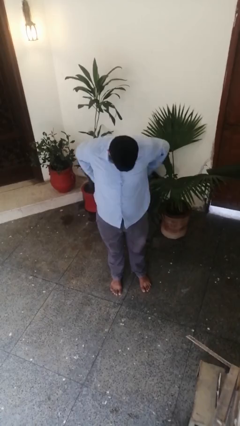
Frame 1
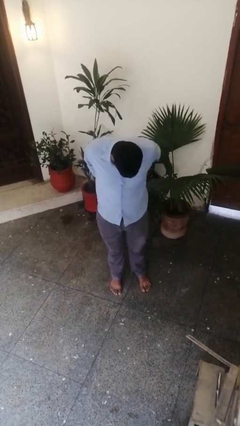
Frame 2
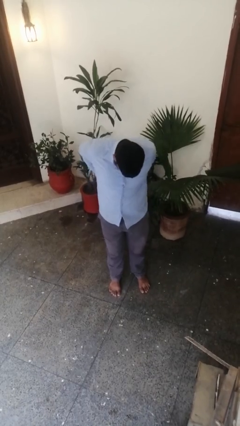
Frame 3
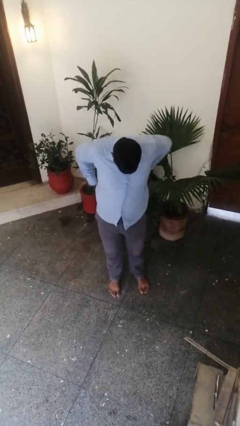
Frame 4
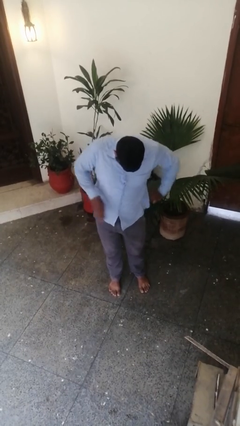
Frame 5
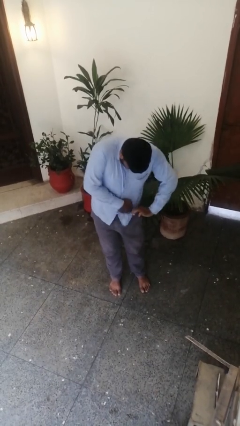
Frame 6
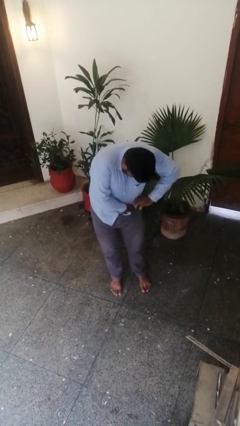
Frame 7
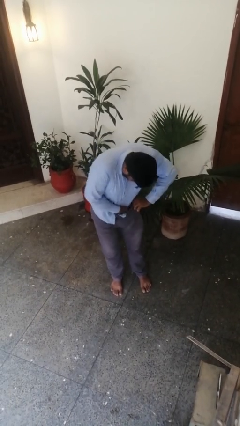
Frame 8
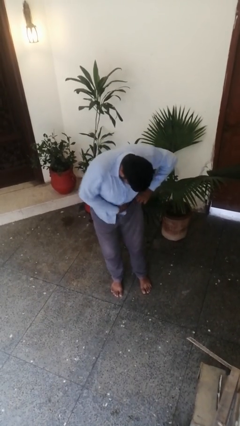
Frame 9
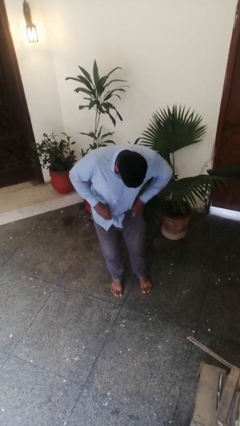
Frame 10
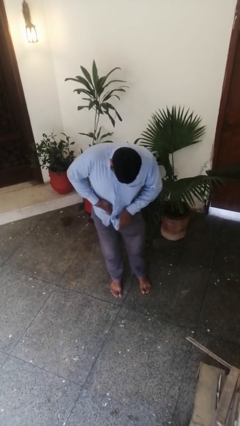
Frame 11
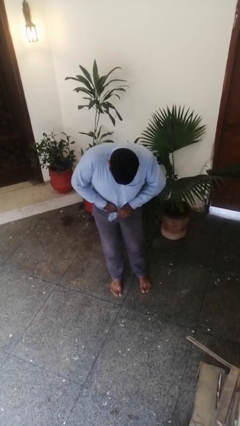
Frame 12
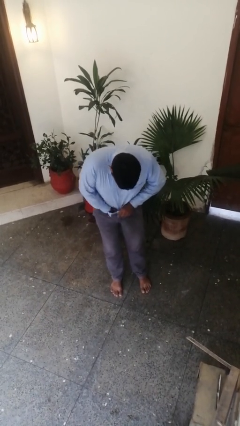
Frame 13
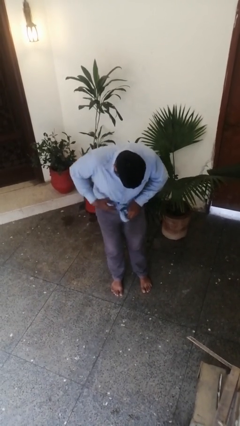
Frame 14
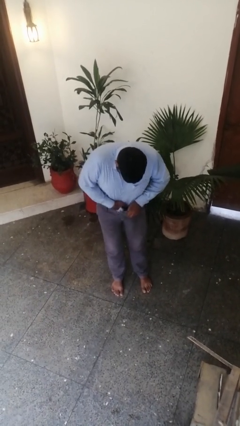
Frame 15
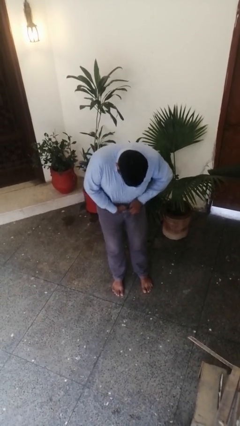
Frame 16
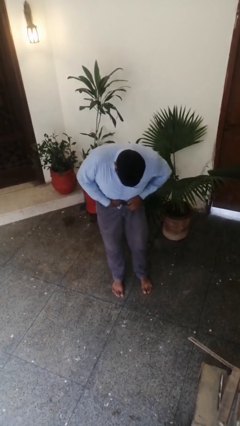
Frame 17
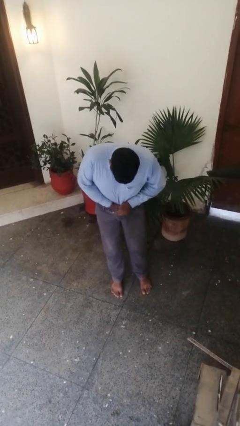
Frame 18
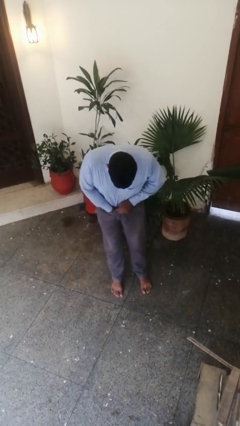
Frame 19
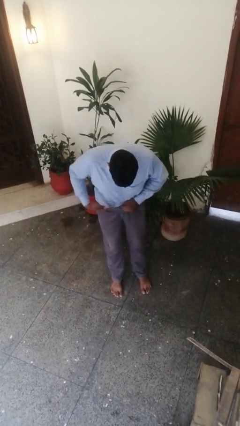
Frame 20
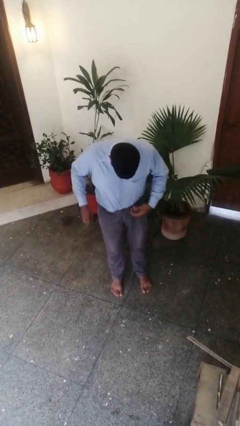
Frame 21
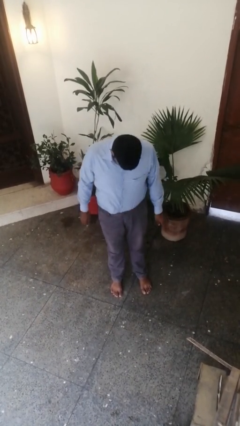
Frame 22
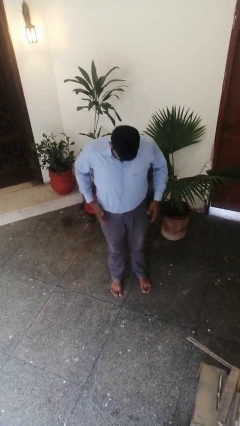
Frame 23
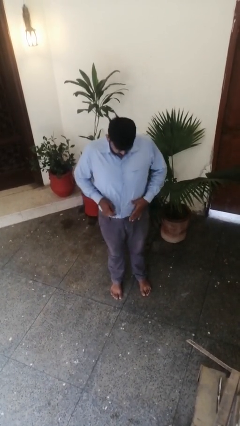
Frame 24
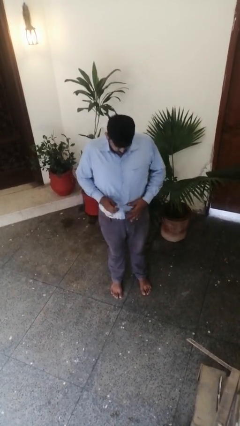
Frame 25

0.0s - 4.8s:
person tucks in shirt

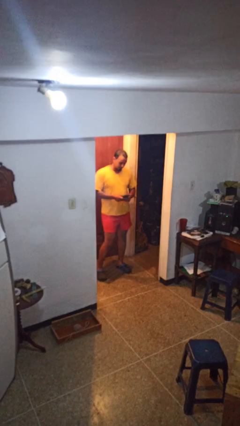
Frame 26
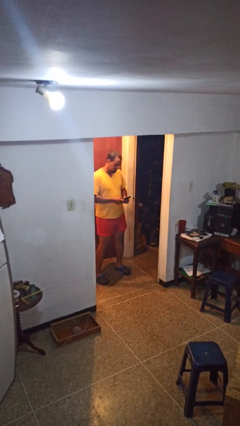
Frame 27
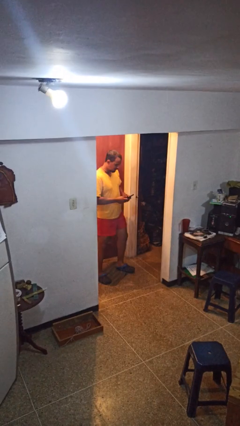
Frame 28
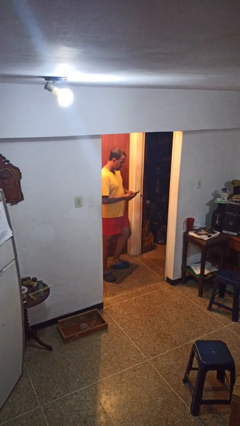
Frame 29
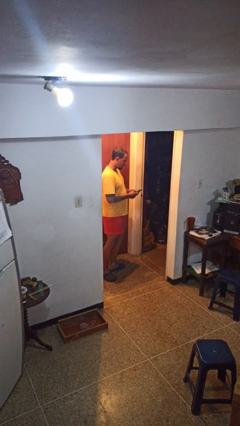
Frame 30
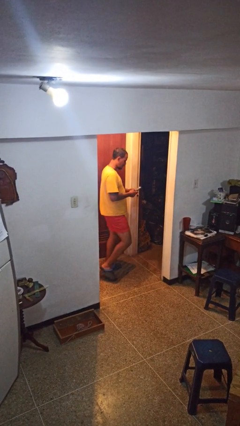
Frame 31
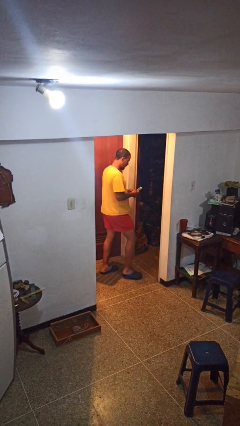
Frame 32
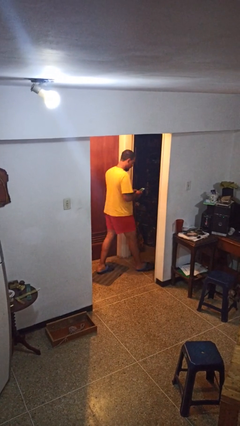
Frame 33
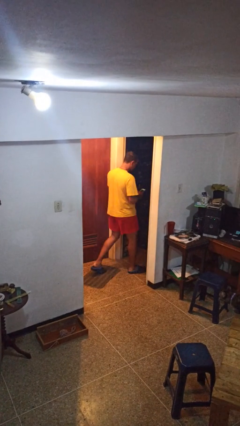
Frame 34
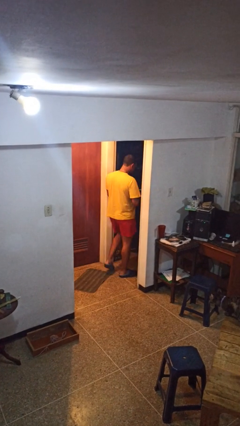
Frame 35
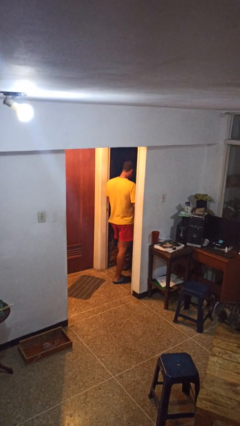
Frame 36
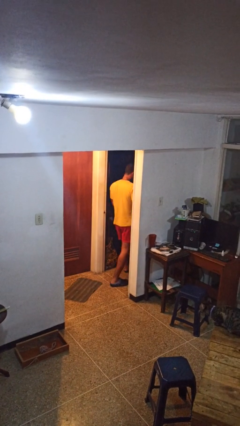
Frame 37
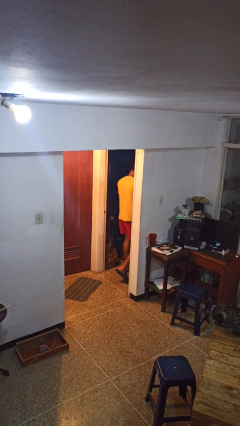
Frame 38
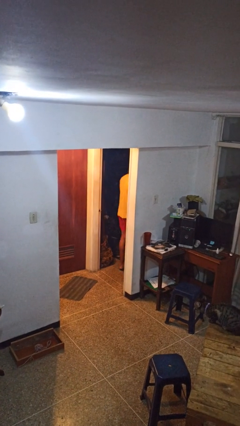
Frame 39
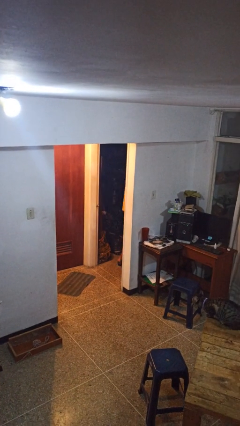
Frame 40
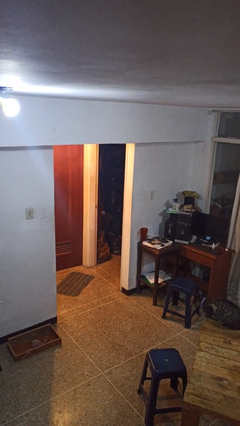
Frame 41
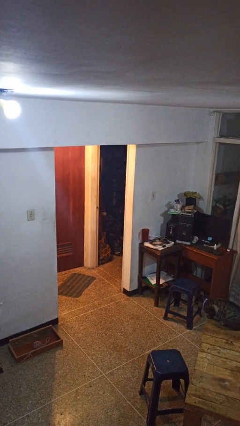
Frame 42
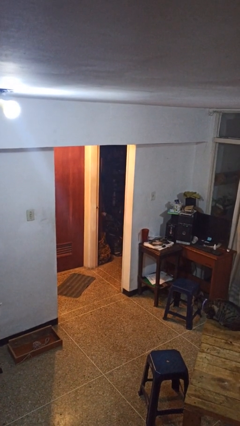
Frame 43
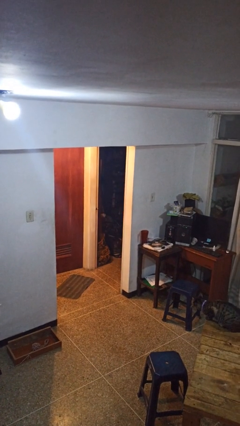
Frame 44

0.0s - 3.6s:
person exits scene through structure

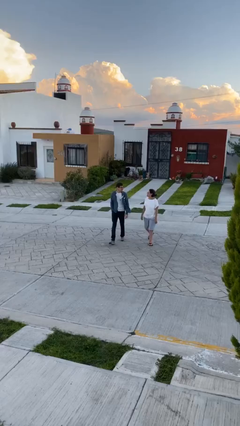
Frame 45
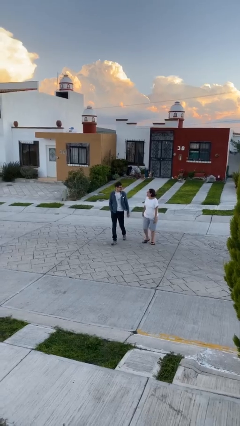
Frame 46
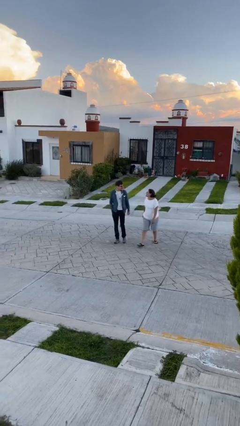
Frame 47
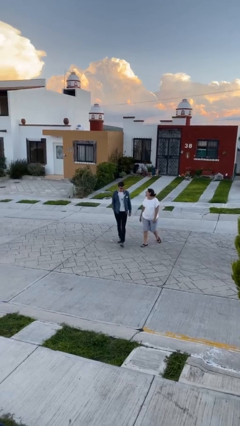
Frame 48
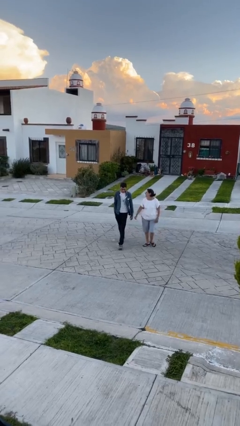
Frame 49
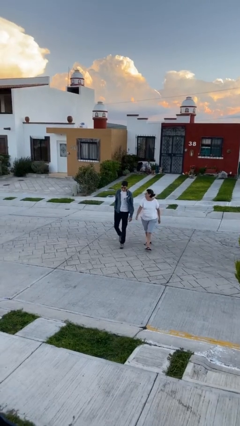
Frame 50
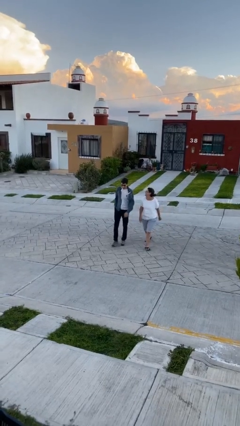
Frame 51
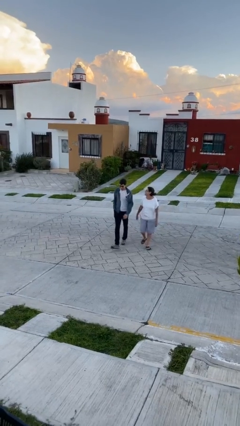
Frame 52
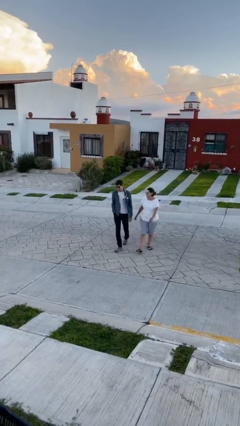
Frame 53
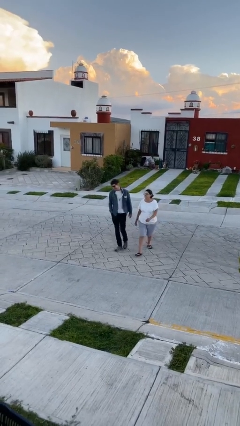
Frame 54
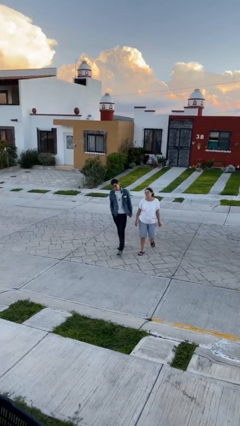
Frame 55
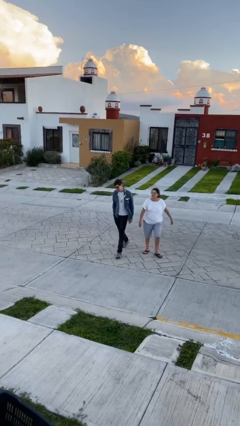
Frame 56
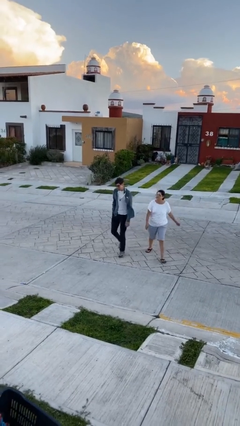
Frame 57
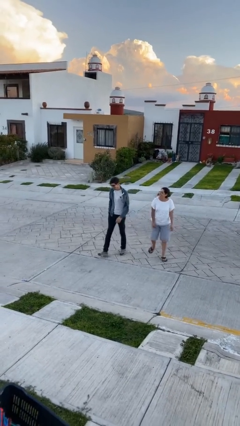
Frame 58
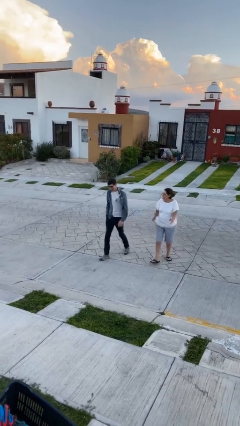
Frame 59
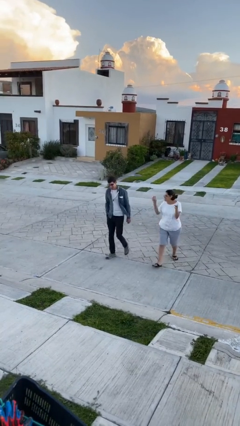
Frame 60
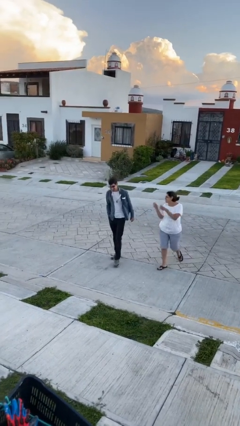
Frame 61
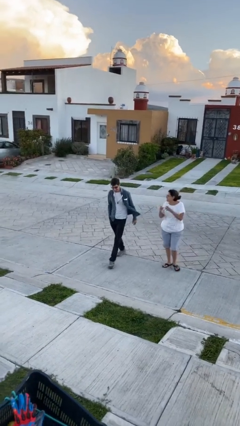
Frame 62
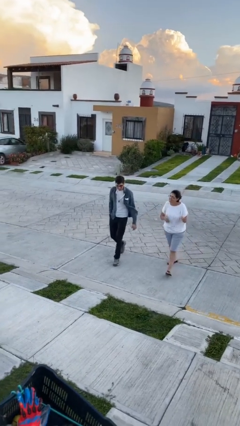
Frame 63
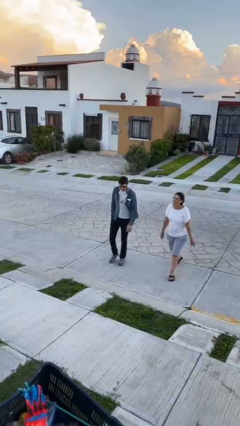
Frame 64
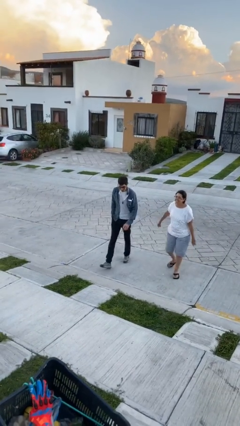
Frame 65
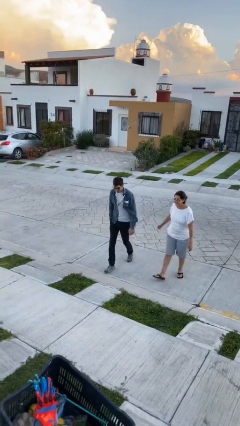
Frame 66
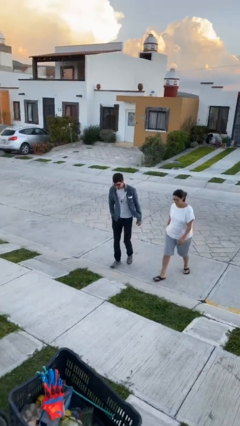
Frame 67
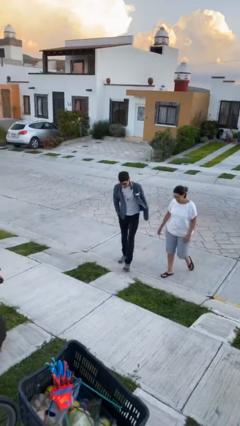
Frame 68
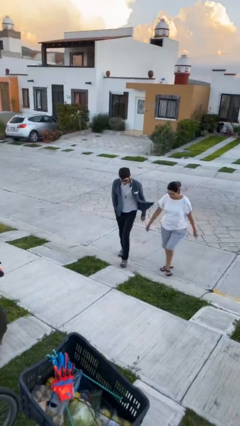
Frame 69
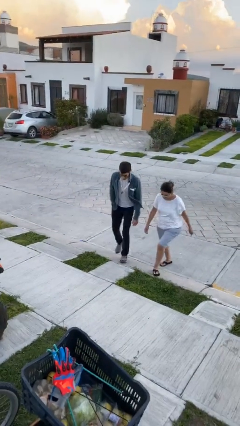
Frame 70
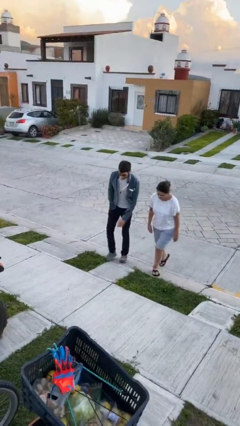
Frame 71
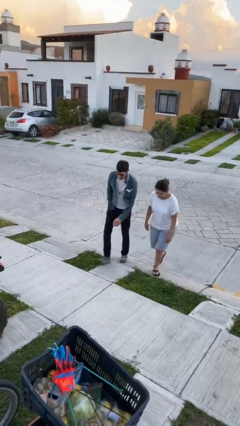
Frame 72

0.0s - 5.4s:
person talks to person

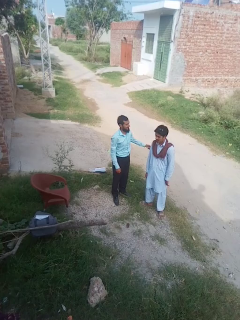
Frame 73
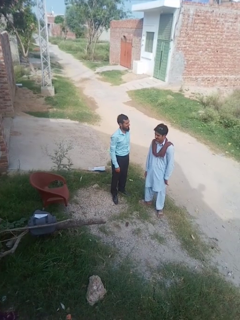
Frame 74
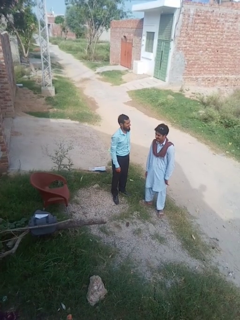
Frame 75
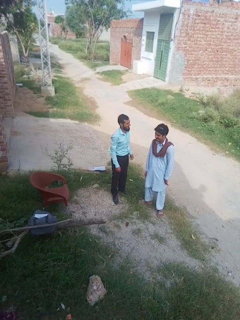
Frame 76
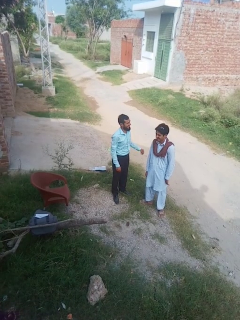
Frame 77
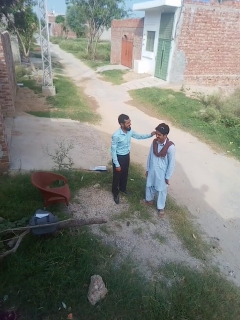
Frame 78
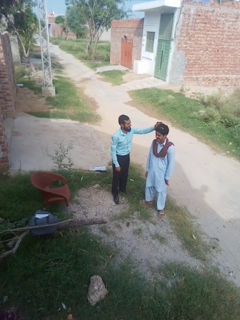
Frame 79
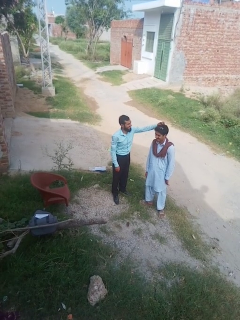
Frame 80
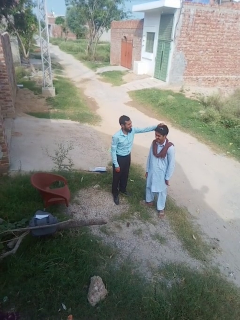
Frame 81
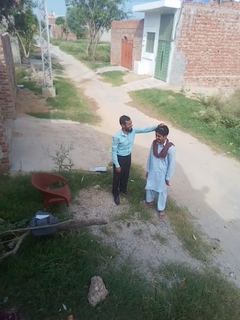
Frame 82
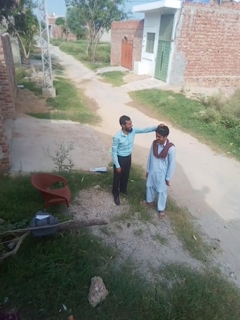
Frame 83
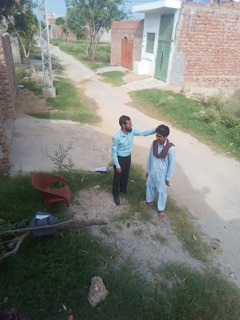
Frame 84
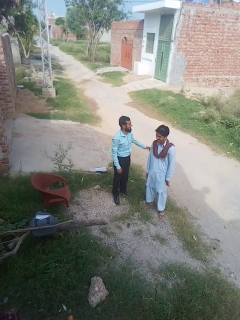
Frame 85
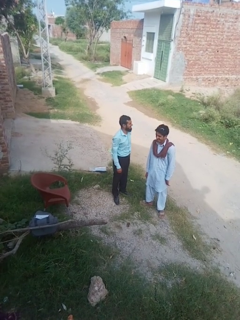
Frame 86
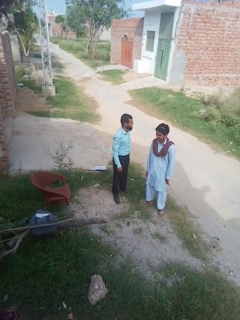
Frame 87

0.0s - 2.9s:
person grabs person by hair

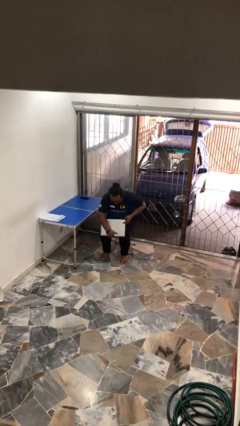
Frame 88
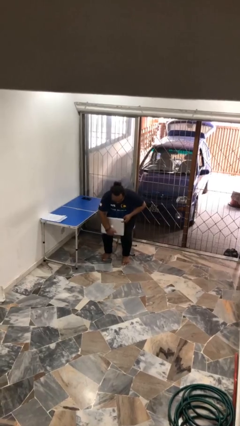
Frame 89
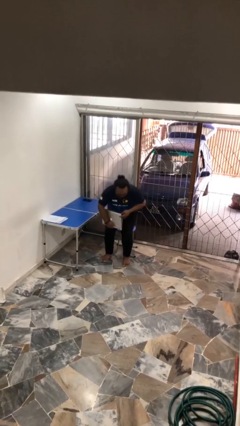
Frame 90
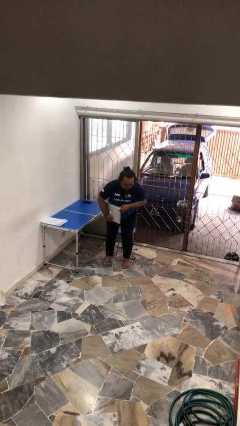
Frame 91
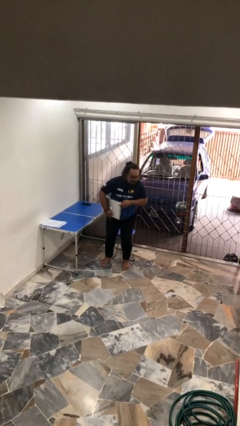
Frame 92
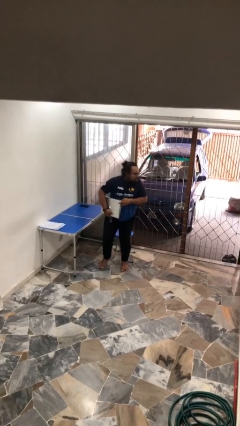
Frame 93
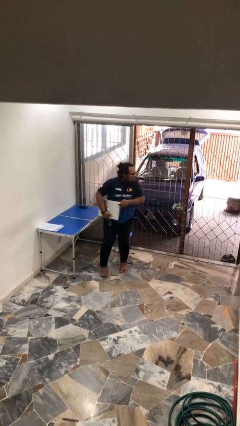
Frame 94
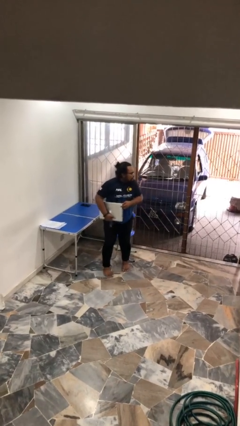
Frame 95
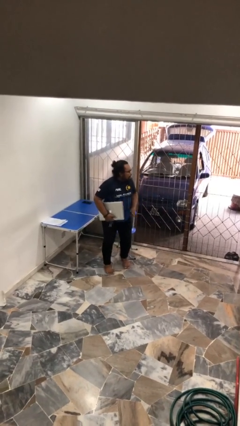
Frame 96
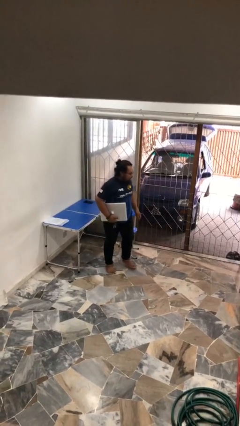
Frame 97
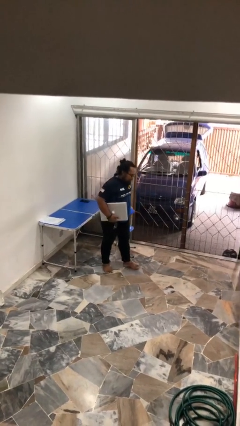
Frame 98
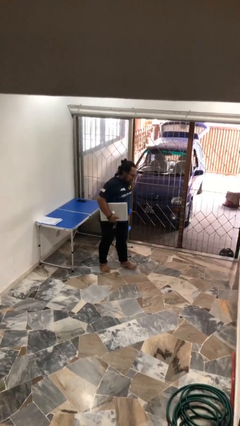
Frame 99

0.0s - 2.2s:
person stands up
